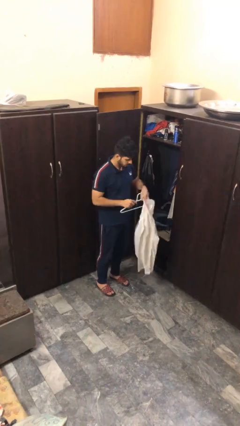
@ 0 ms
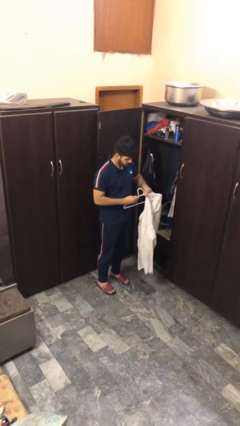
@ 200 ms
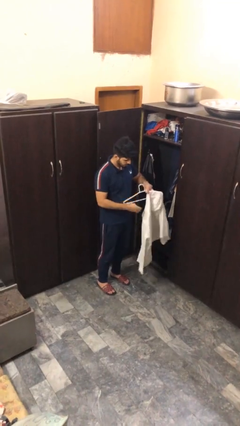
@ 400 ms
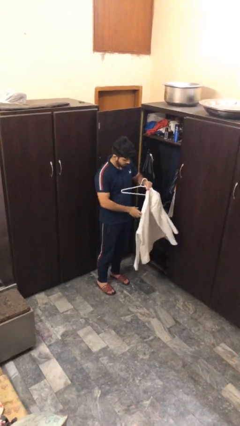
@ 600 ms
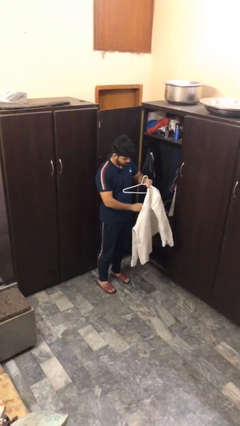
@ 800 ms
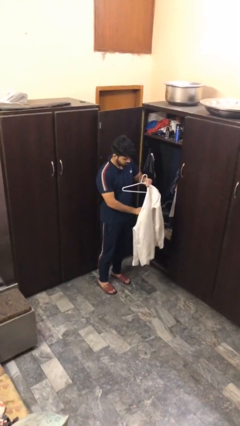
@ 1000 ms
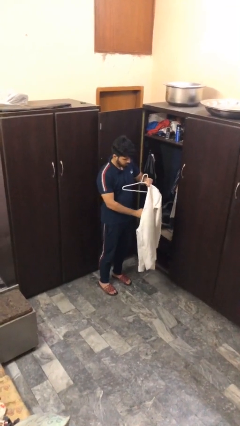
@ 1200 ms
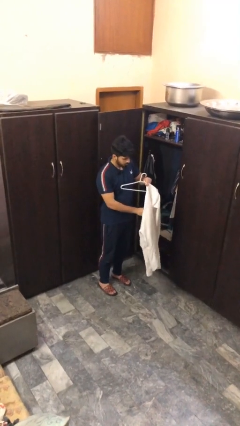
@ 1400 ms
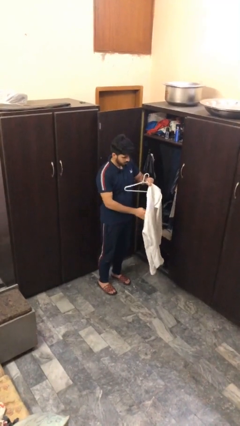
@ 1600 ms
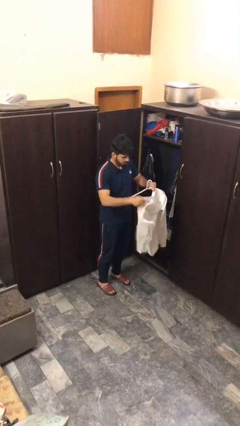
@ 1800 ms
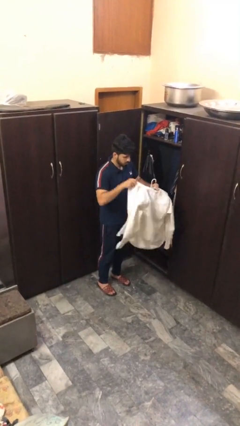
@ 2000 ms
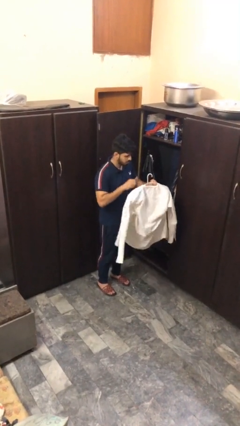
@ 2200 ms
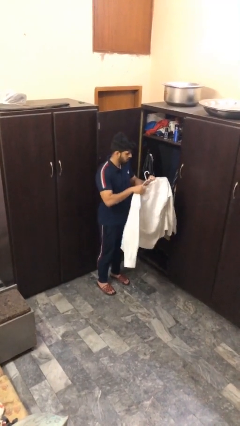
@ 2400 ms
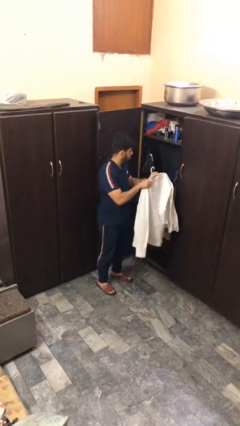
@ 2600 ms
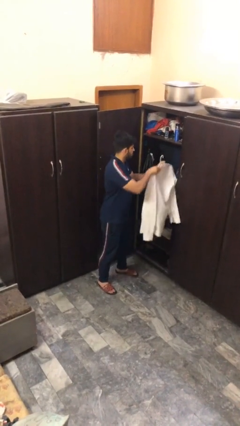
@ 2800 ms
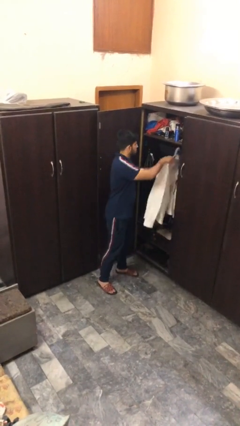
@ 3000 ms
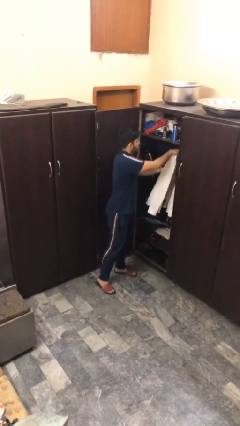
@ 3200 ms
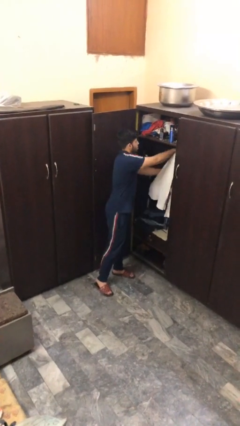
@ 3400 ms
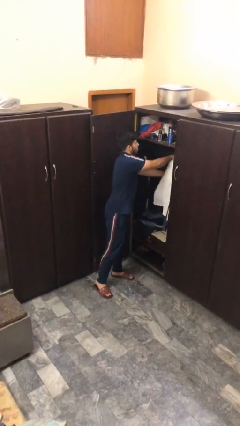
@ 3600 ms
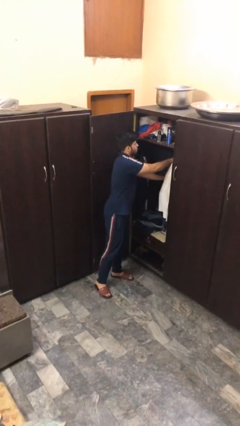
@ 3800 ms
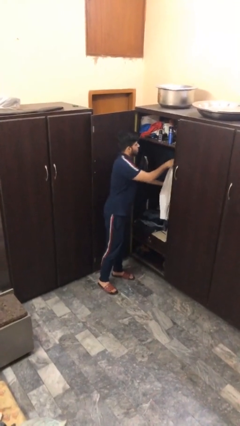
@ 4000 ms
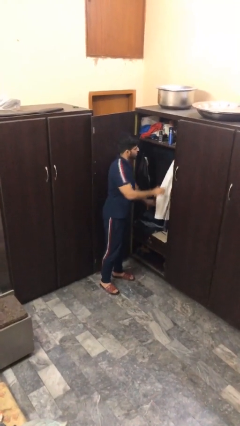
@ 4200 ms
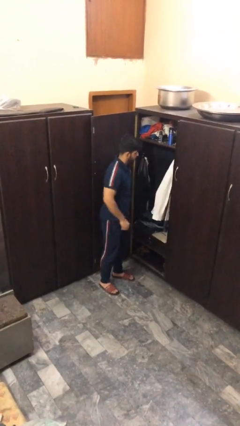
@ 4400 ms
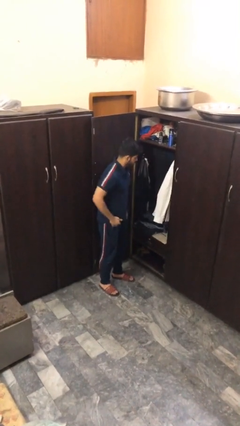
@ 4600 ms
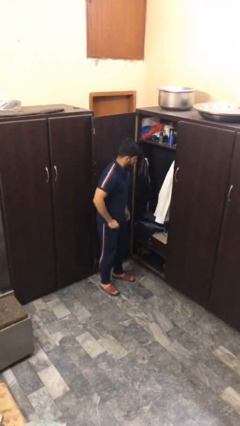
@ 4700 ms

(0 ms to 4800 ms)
person puts clothes into closet

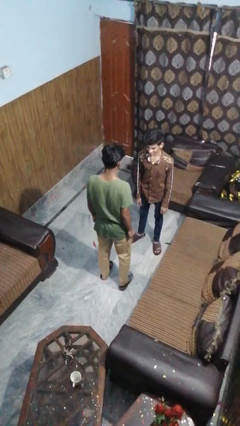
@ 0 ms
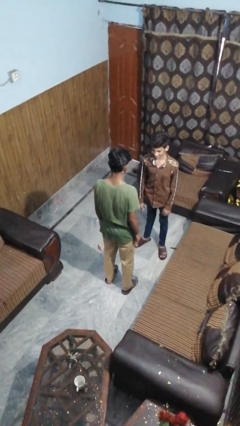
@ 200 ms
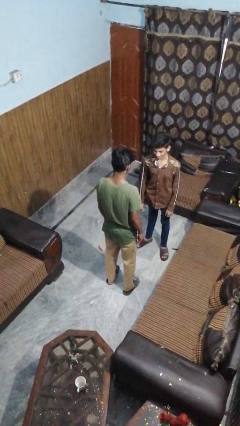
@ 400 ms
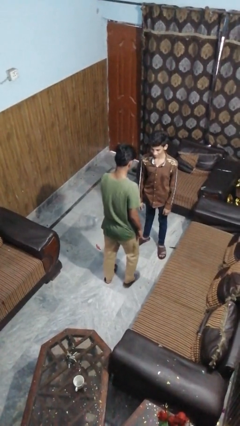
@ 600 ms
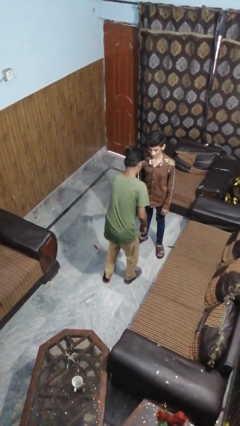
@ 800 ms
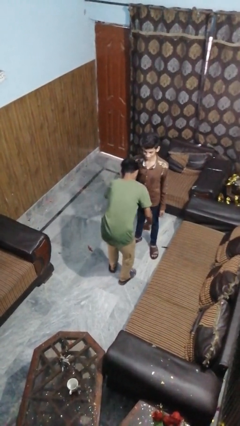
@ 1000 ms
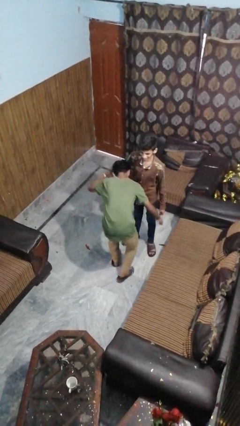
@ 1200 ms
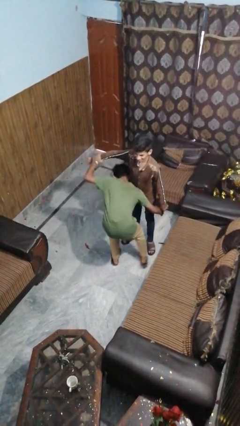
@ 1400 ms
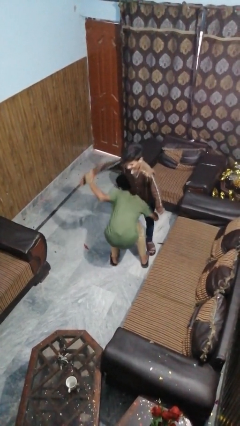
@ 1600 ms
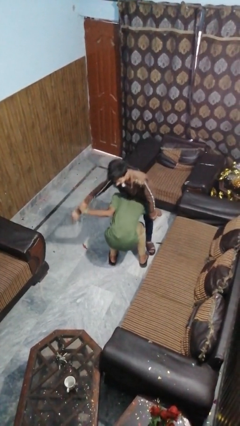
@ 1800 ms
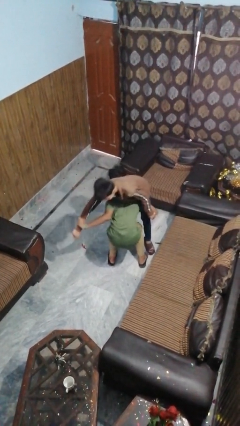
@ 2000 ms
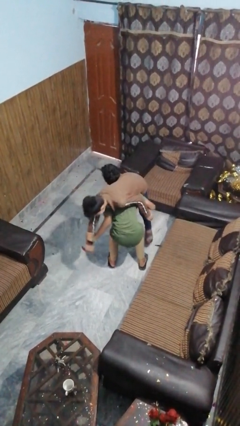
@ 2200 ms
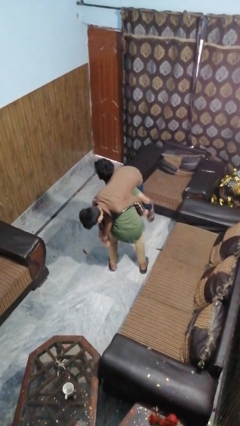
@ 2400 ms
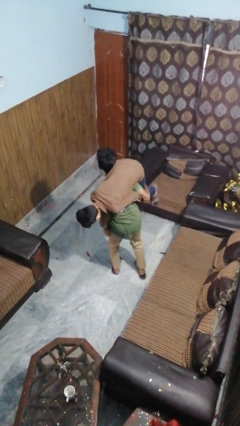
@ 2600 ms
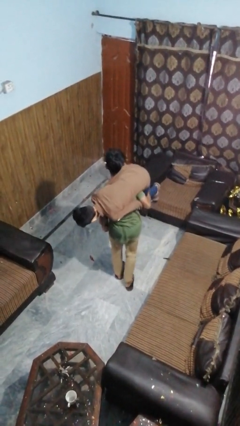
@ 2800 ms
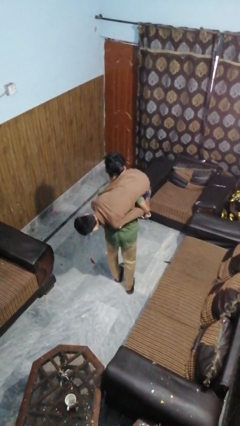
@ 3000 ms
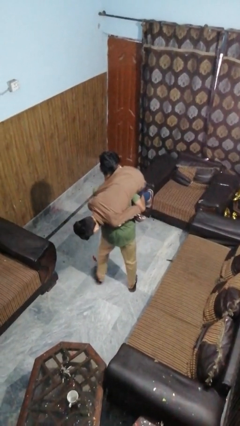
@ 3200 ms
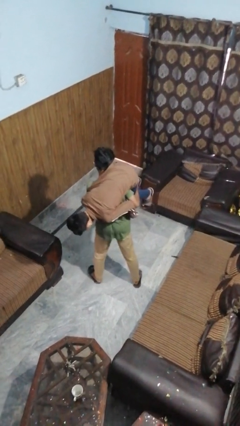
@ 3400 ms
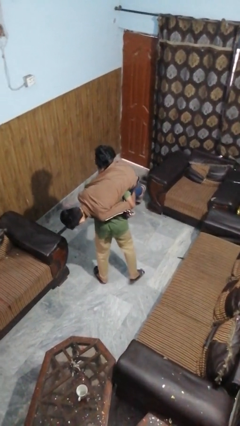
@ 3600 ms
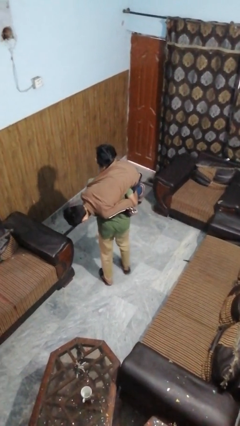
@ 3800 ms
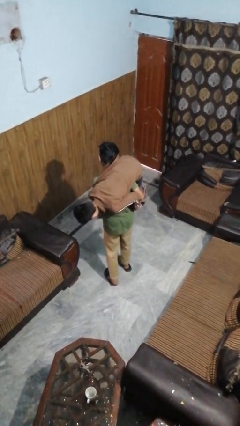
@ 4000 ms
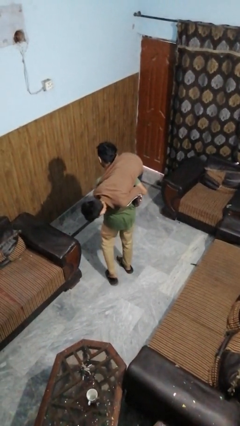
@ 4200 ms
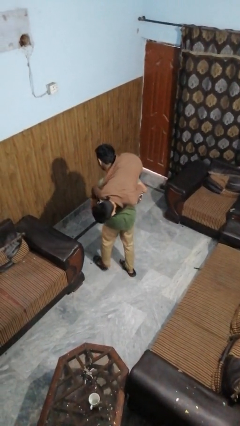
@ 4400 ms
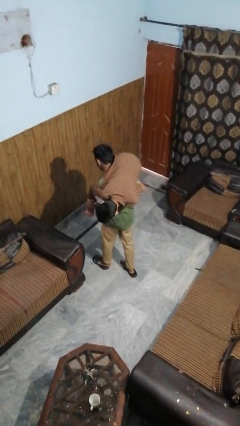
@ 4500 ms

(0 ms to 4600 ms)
person carries person on shoulders

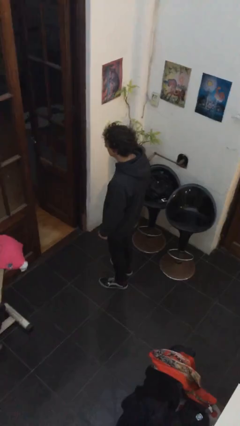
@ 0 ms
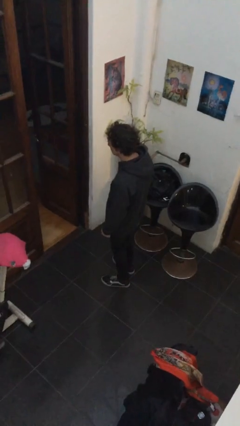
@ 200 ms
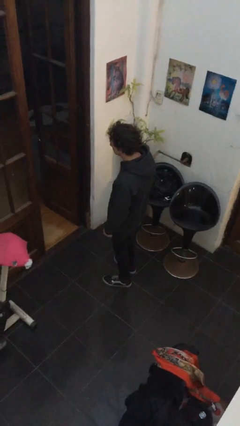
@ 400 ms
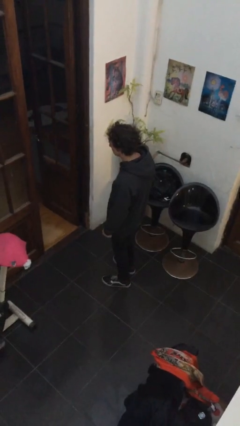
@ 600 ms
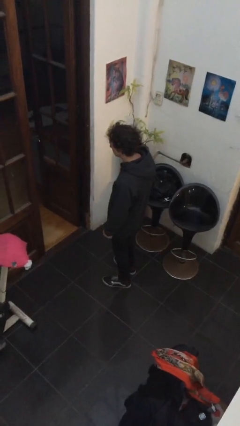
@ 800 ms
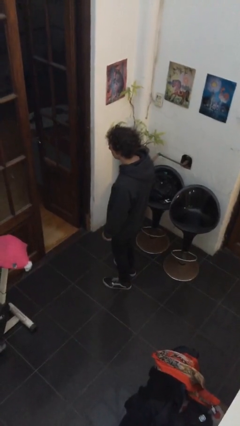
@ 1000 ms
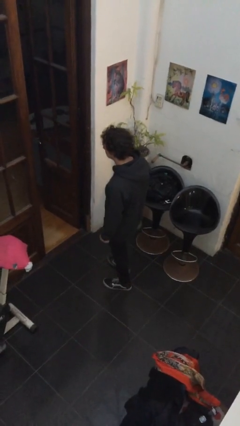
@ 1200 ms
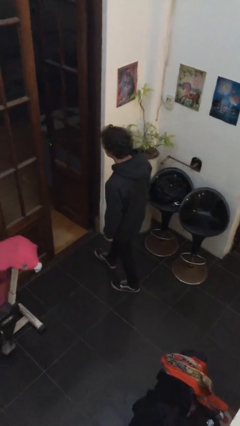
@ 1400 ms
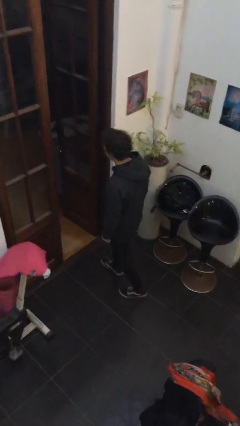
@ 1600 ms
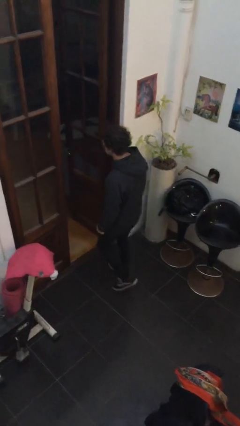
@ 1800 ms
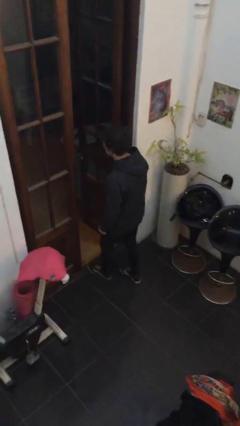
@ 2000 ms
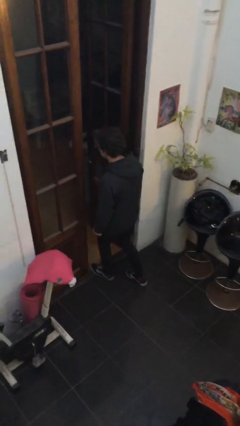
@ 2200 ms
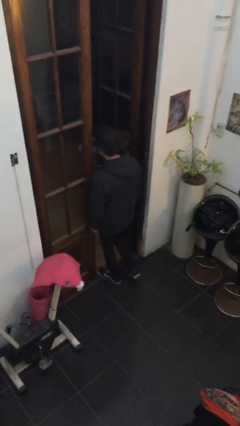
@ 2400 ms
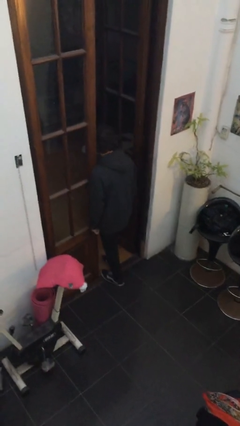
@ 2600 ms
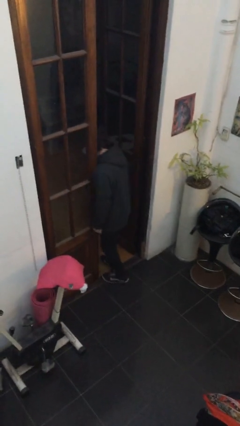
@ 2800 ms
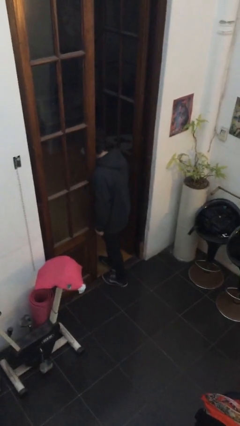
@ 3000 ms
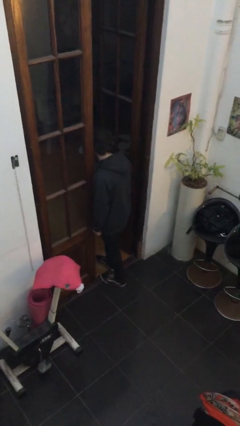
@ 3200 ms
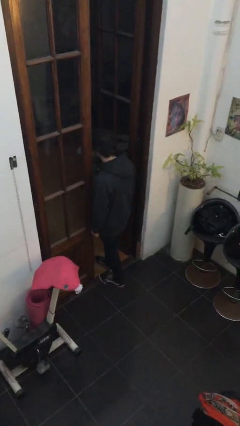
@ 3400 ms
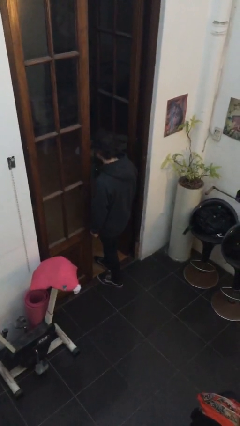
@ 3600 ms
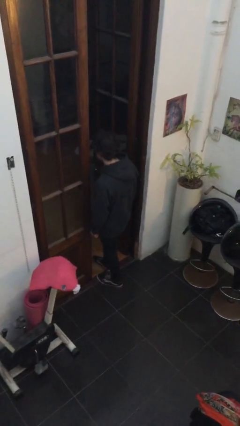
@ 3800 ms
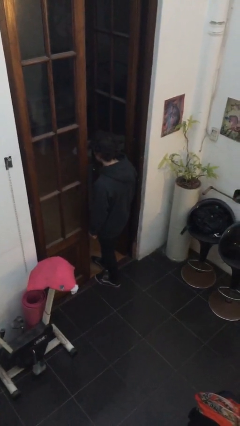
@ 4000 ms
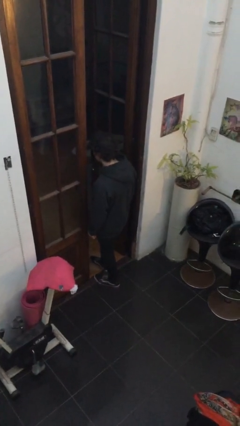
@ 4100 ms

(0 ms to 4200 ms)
person bumps into wall

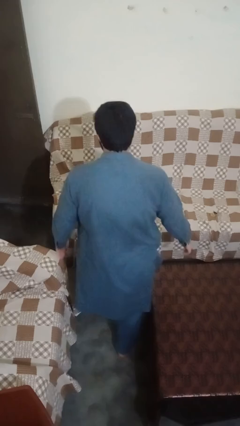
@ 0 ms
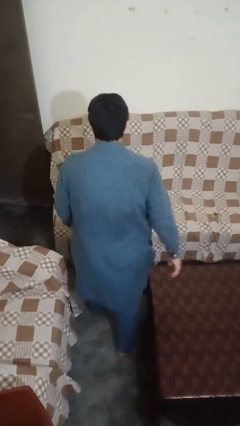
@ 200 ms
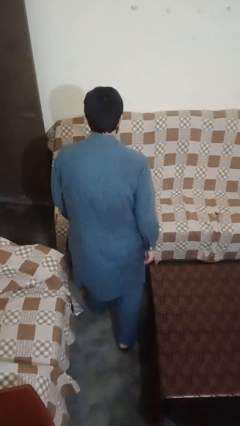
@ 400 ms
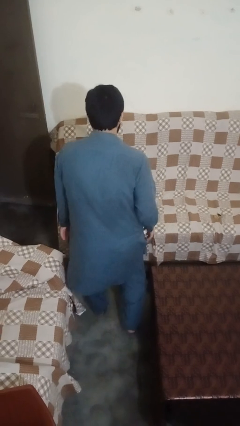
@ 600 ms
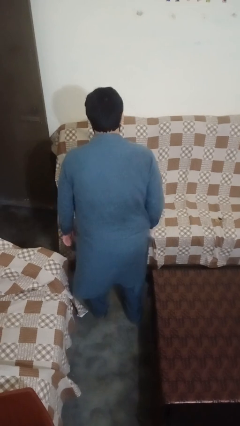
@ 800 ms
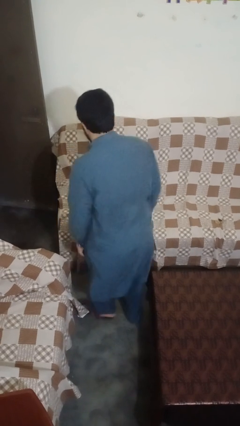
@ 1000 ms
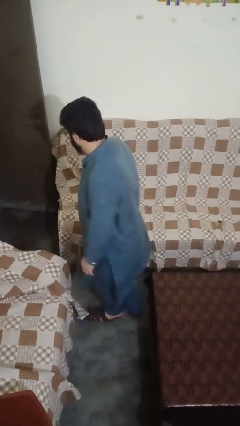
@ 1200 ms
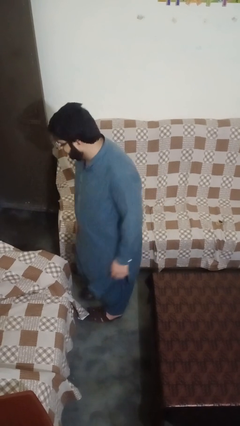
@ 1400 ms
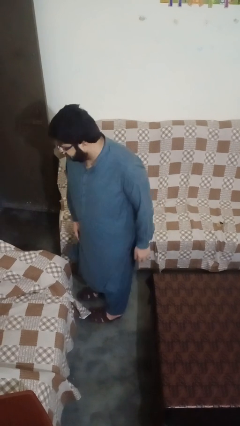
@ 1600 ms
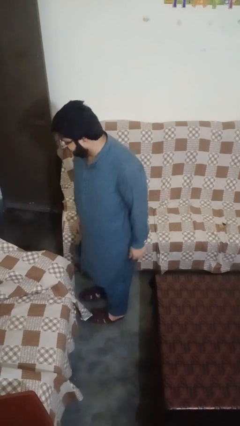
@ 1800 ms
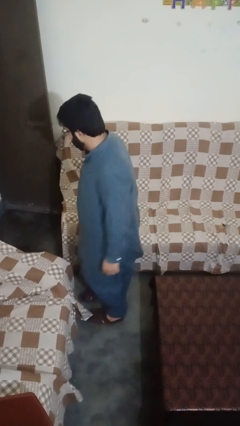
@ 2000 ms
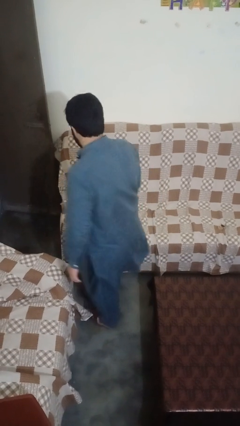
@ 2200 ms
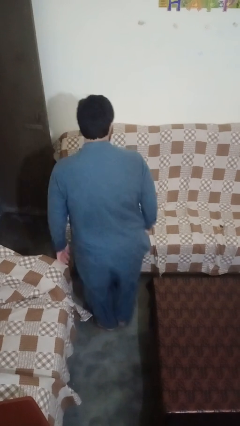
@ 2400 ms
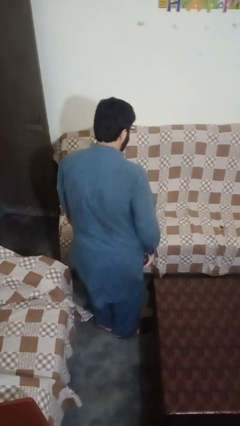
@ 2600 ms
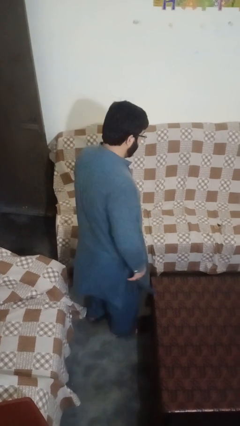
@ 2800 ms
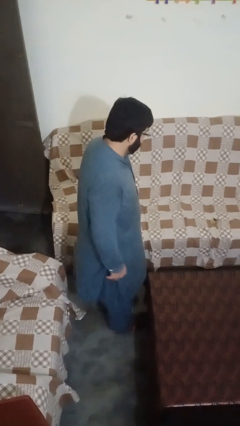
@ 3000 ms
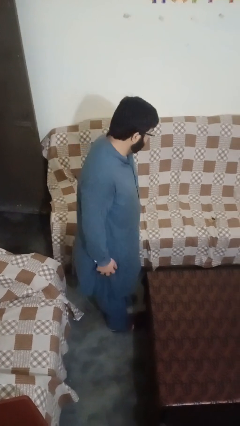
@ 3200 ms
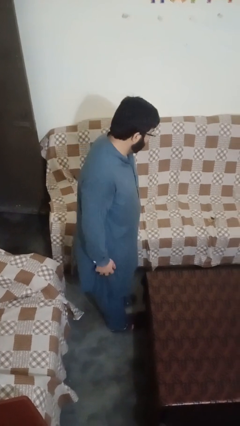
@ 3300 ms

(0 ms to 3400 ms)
person twirls

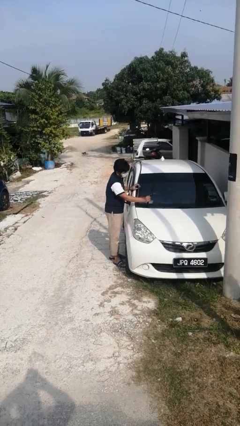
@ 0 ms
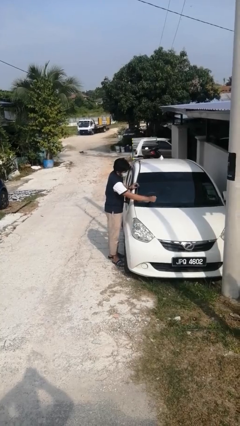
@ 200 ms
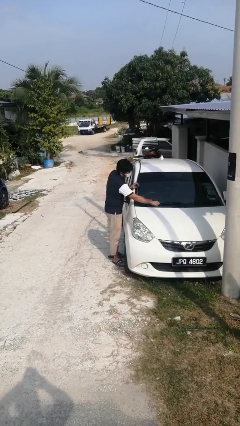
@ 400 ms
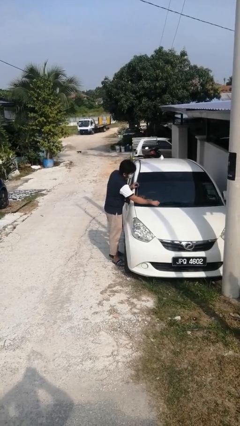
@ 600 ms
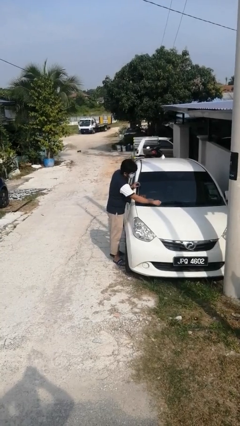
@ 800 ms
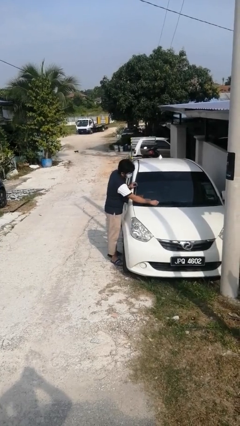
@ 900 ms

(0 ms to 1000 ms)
person flips down car wipers
